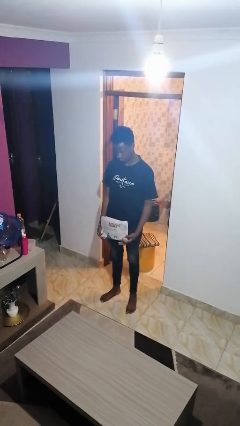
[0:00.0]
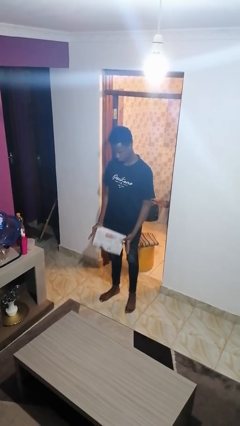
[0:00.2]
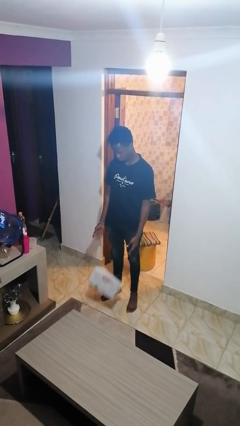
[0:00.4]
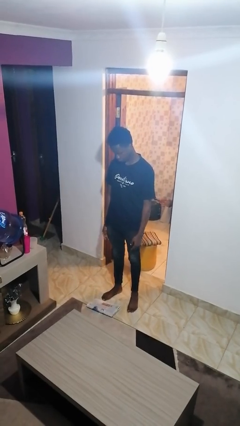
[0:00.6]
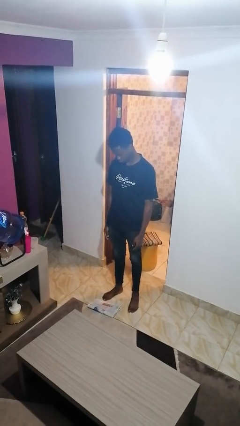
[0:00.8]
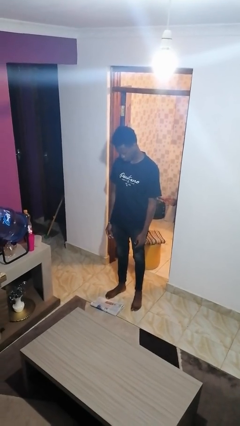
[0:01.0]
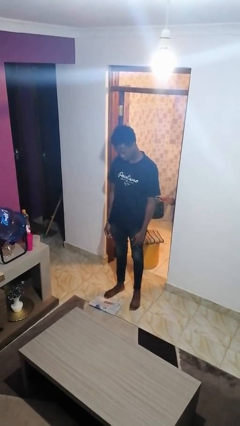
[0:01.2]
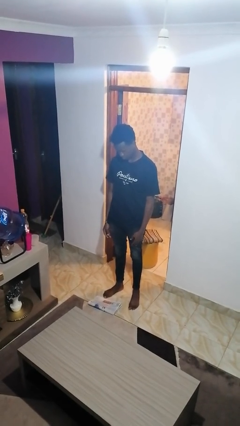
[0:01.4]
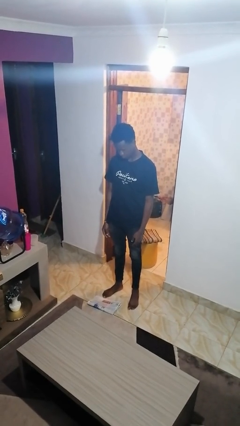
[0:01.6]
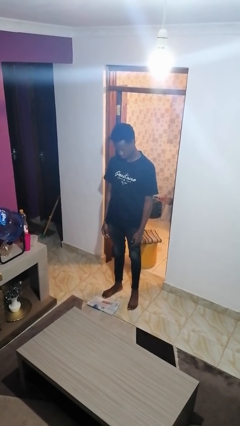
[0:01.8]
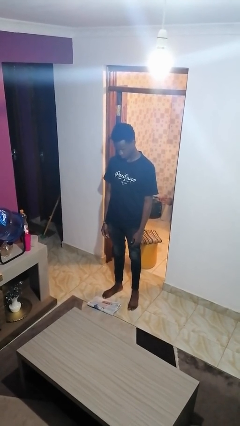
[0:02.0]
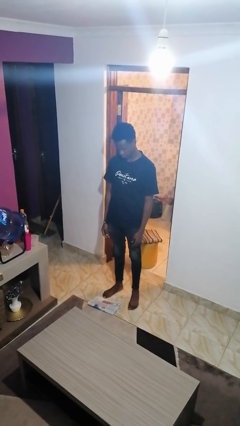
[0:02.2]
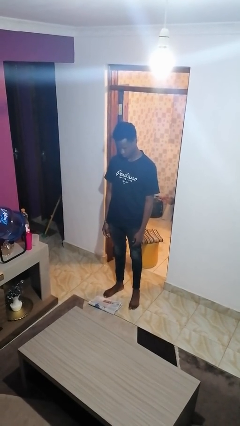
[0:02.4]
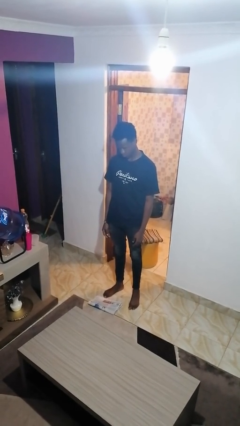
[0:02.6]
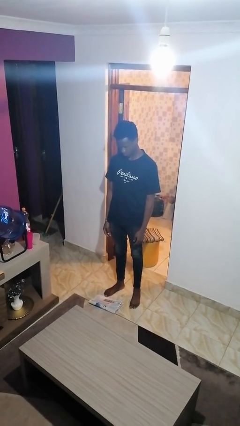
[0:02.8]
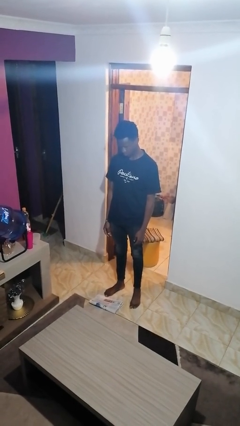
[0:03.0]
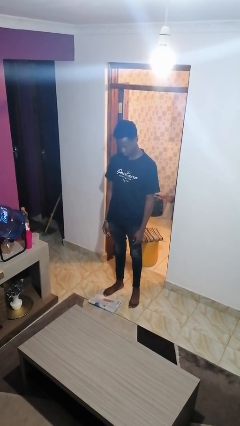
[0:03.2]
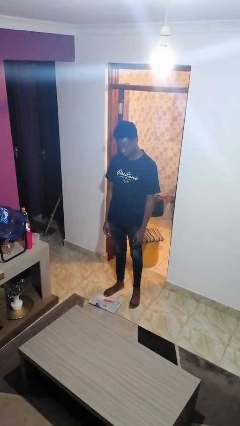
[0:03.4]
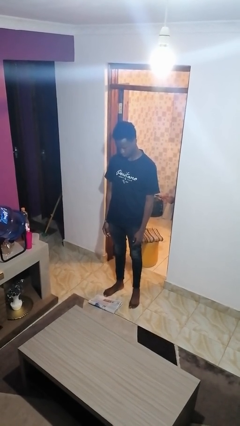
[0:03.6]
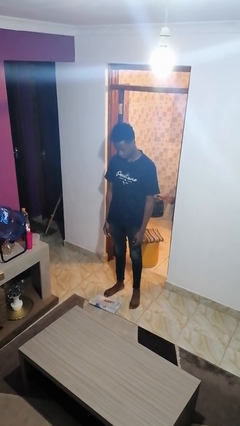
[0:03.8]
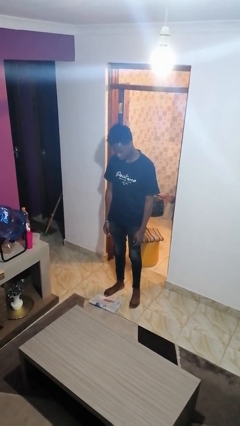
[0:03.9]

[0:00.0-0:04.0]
person drops object

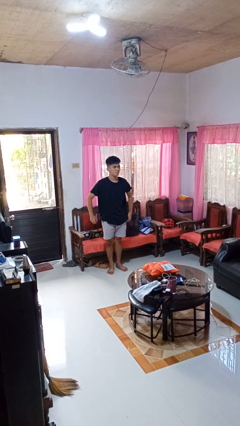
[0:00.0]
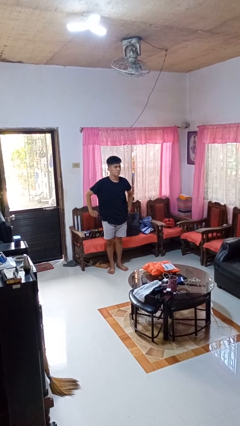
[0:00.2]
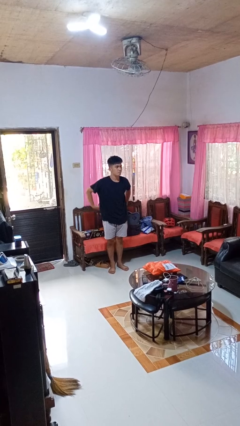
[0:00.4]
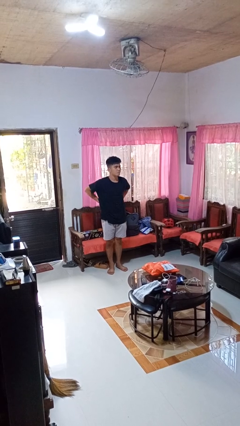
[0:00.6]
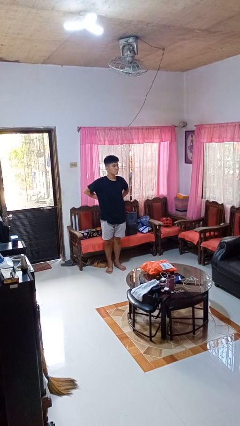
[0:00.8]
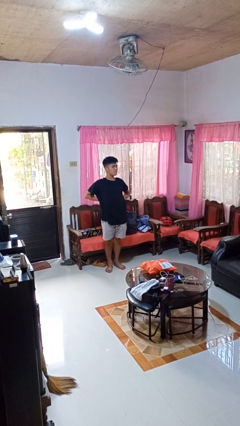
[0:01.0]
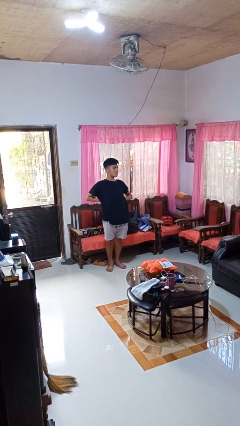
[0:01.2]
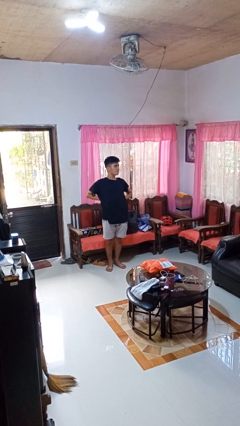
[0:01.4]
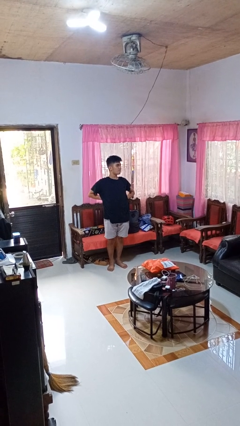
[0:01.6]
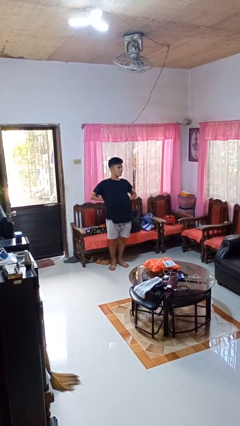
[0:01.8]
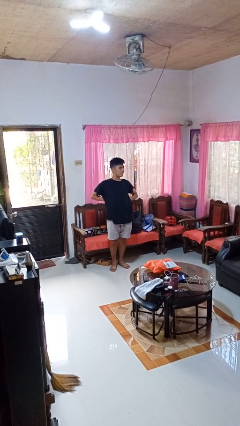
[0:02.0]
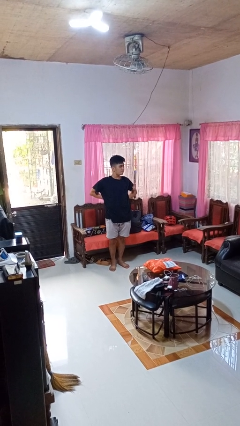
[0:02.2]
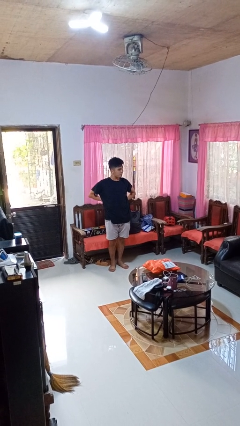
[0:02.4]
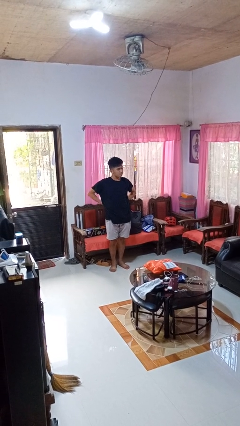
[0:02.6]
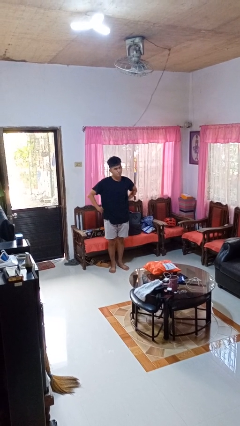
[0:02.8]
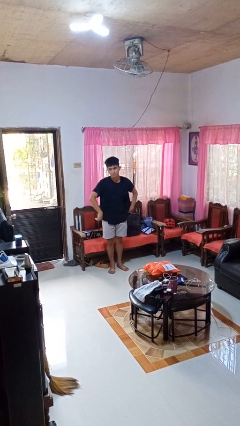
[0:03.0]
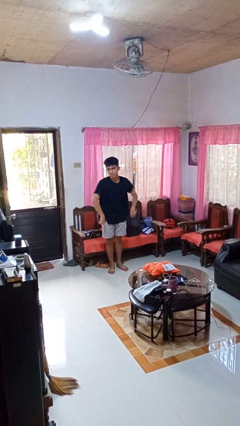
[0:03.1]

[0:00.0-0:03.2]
person stretches back

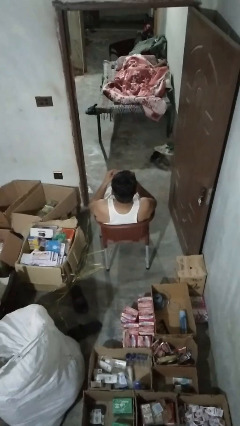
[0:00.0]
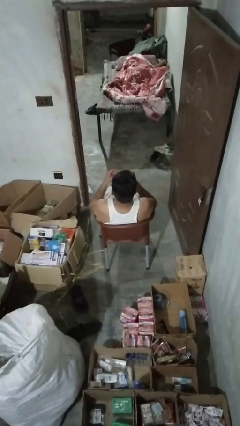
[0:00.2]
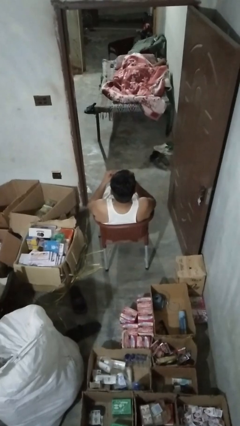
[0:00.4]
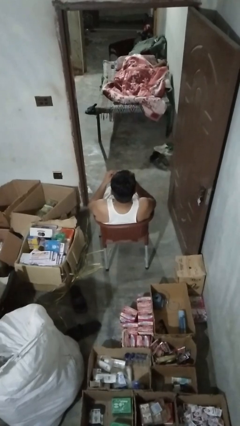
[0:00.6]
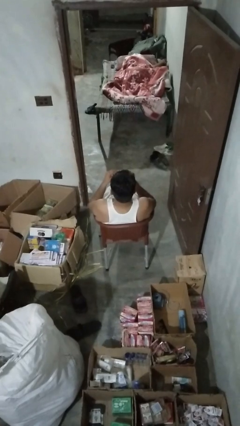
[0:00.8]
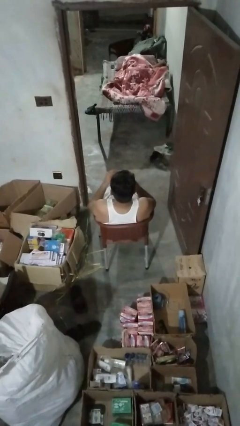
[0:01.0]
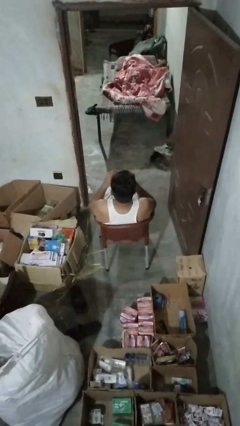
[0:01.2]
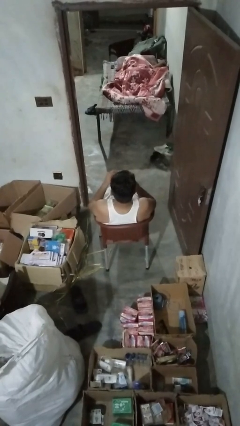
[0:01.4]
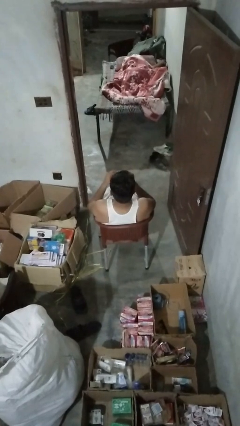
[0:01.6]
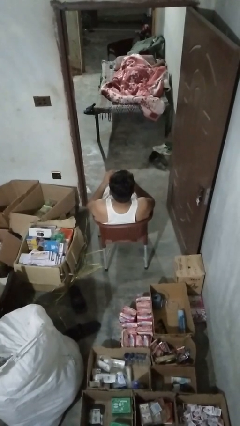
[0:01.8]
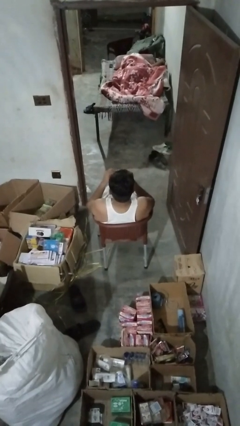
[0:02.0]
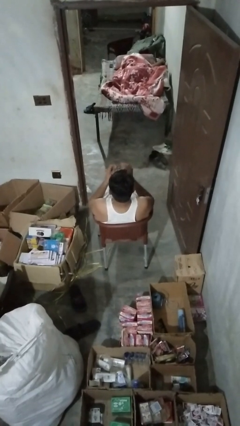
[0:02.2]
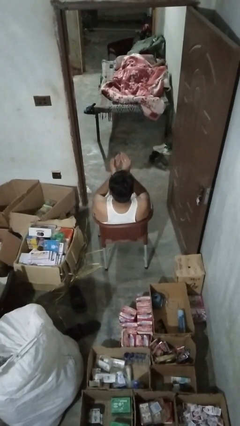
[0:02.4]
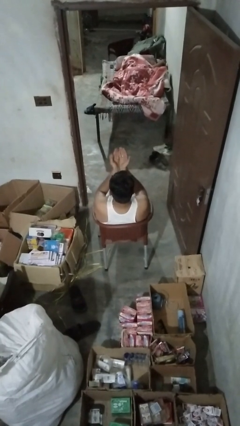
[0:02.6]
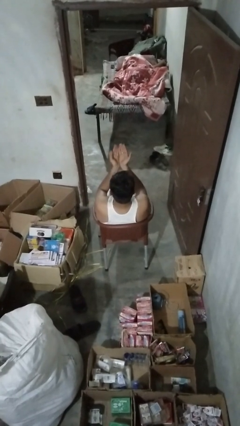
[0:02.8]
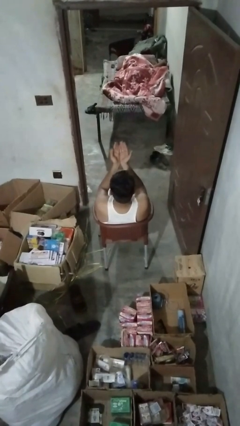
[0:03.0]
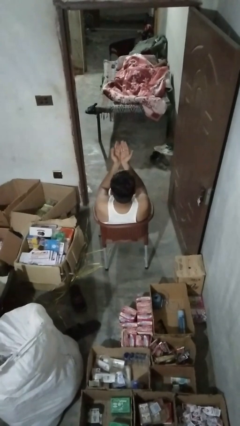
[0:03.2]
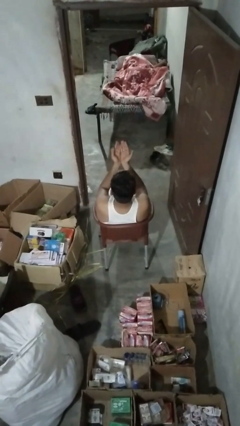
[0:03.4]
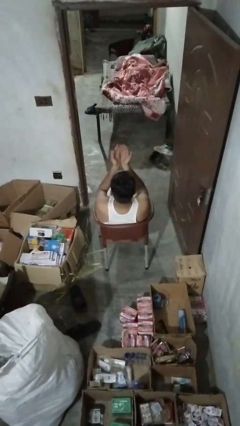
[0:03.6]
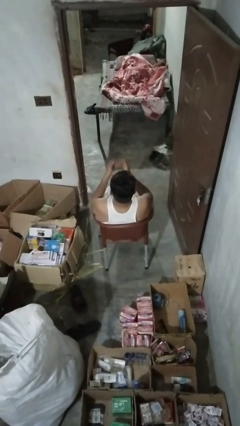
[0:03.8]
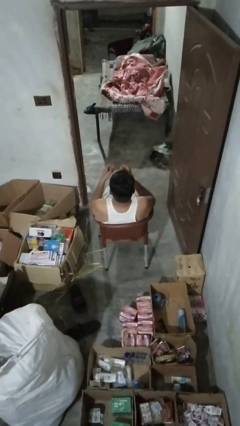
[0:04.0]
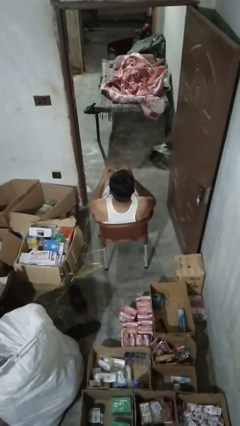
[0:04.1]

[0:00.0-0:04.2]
person prays

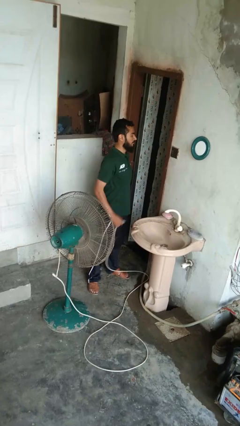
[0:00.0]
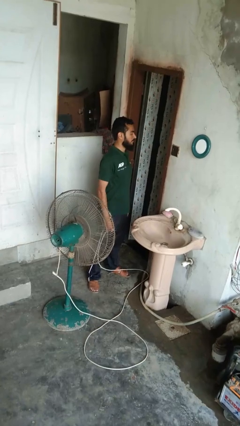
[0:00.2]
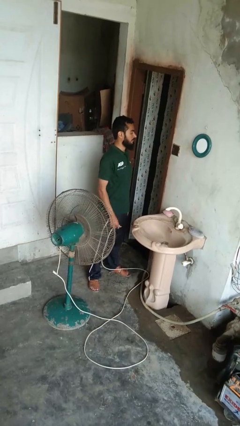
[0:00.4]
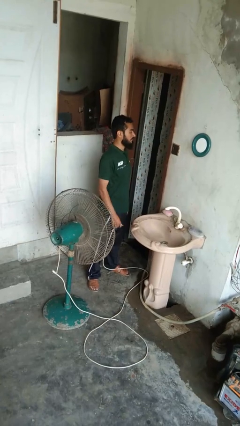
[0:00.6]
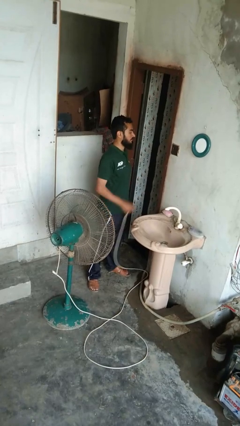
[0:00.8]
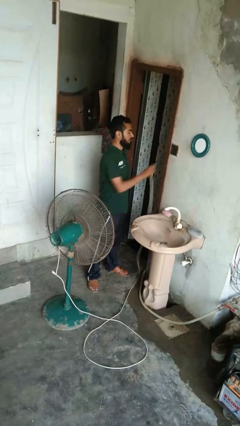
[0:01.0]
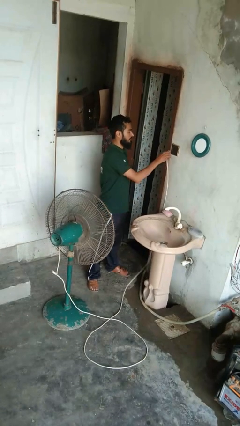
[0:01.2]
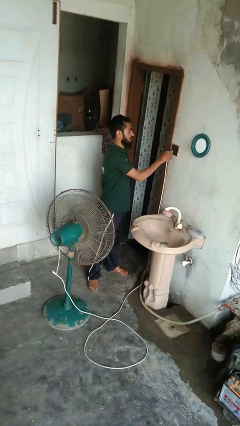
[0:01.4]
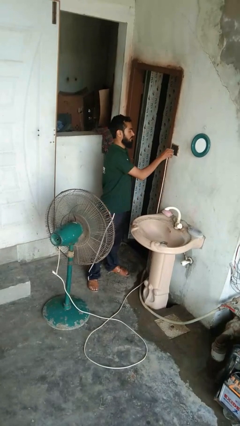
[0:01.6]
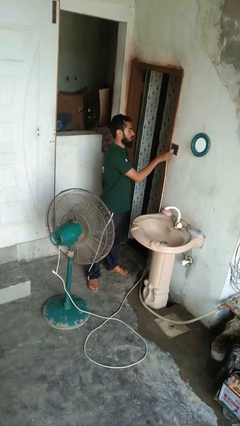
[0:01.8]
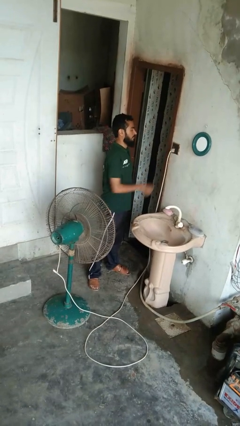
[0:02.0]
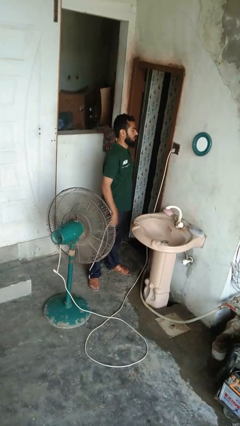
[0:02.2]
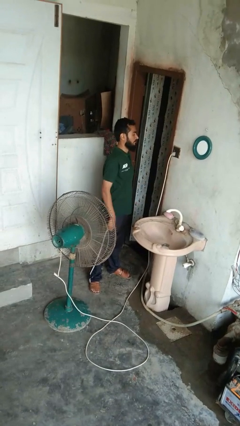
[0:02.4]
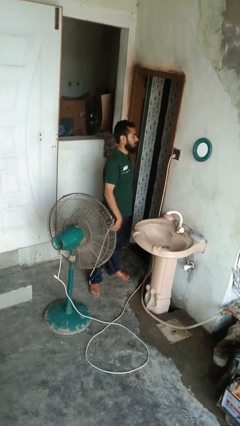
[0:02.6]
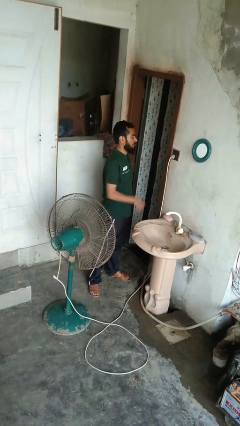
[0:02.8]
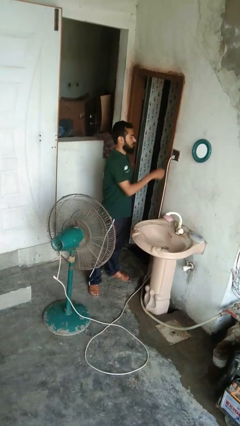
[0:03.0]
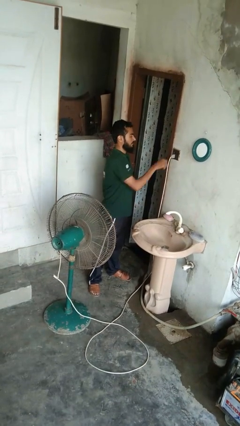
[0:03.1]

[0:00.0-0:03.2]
person turns on fan

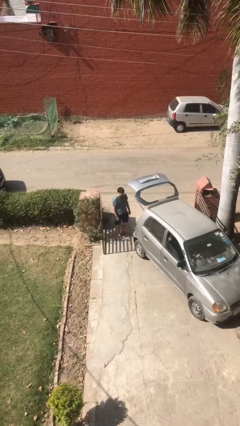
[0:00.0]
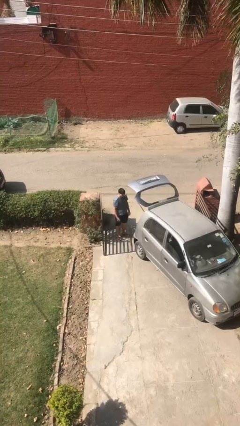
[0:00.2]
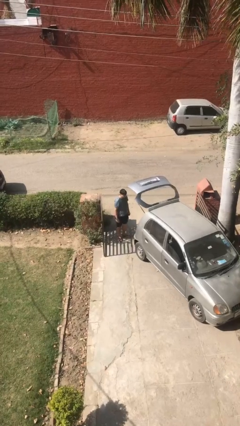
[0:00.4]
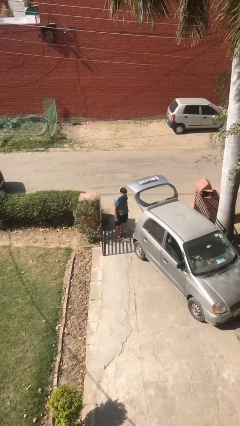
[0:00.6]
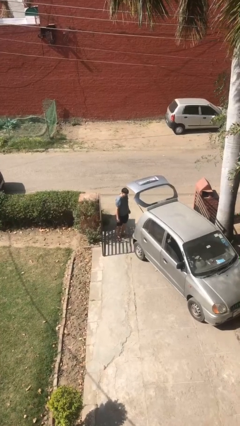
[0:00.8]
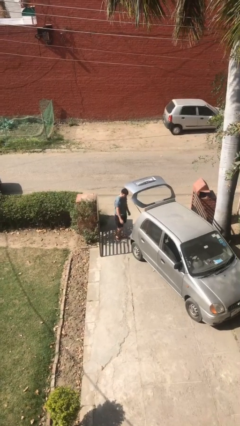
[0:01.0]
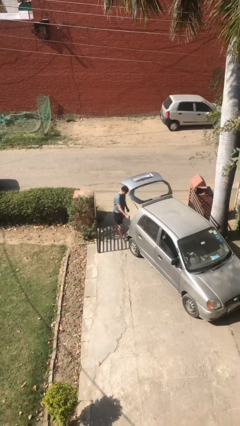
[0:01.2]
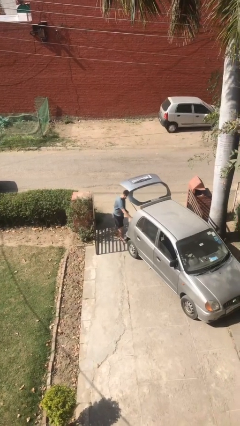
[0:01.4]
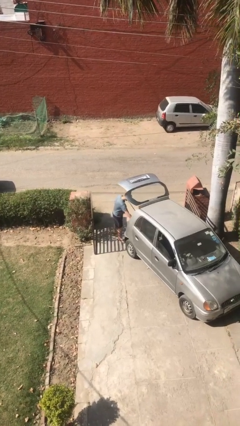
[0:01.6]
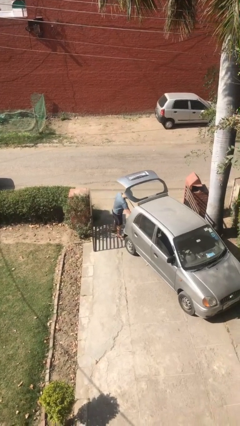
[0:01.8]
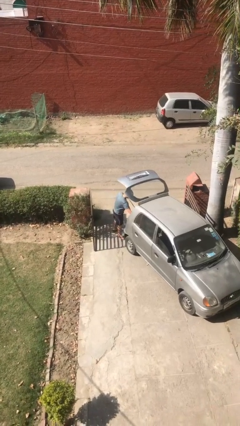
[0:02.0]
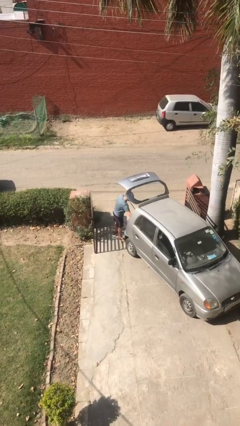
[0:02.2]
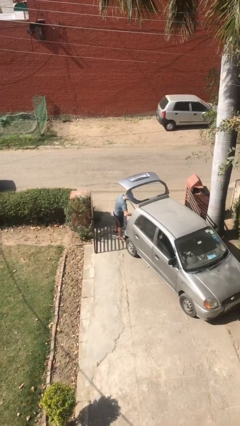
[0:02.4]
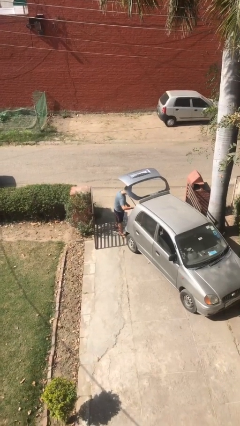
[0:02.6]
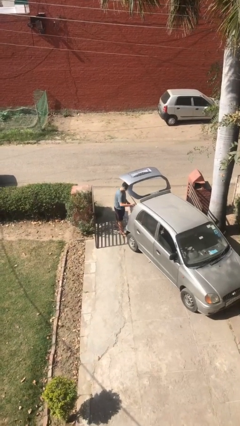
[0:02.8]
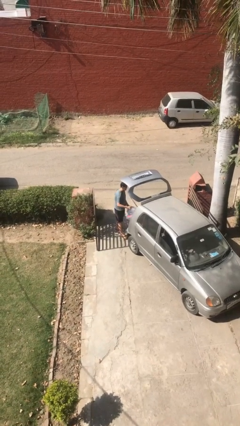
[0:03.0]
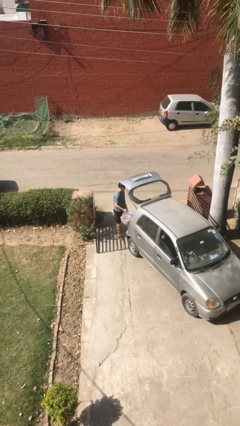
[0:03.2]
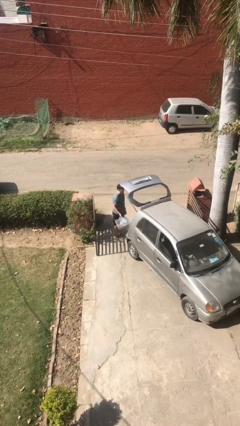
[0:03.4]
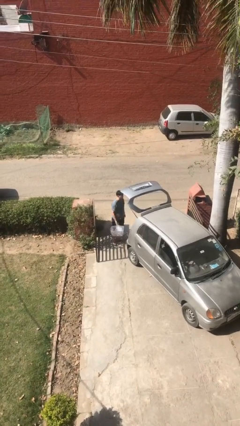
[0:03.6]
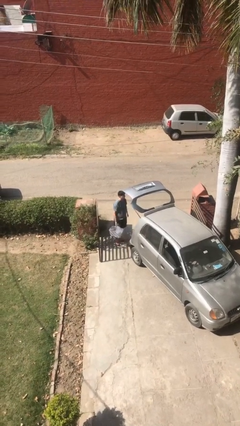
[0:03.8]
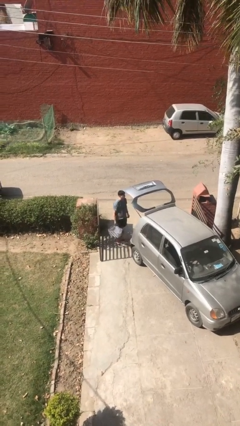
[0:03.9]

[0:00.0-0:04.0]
person unloads car
